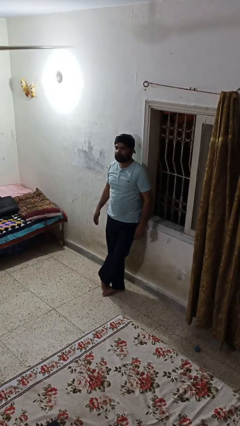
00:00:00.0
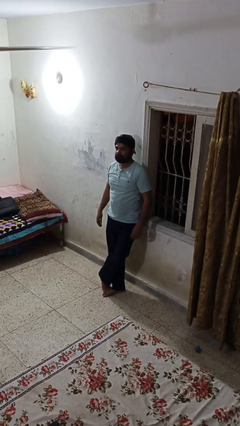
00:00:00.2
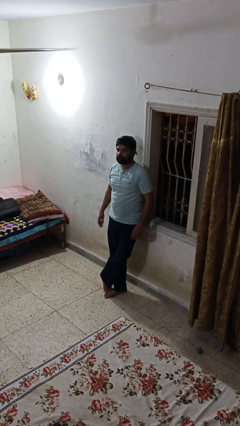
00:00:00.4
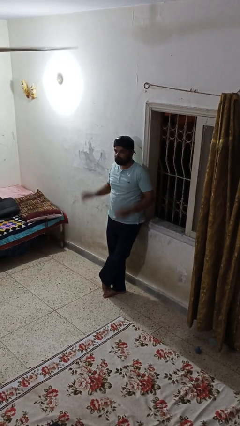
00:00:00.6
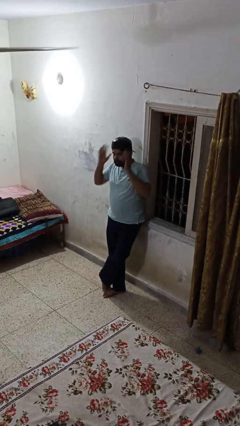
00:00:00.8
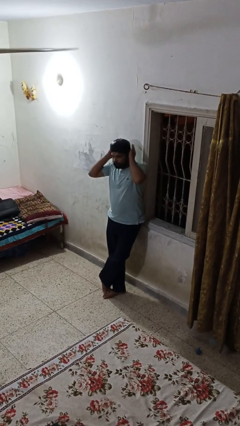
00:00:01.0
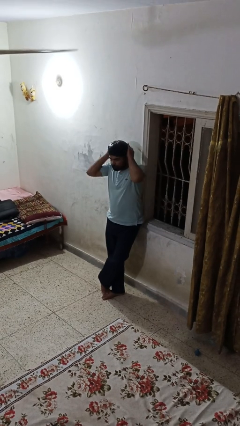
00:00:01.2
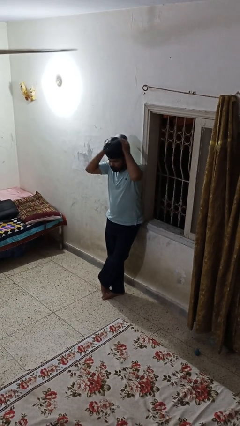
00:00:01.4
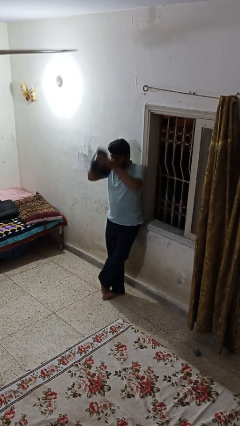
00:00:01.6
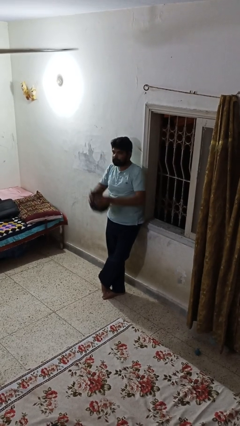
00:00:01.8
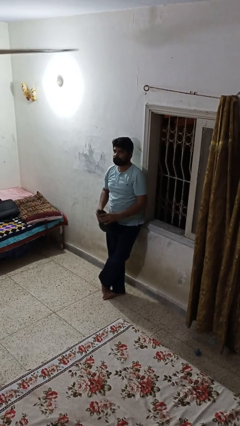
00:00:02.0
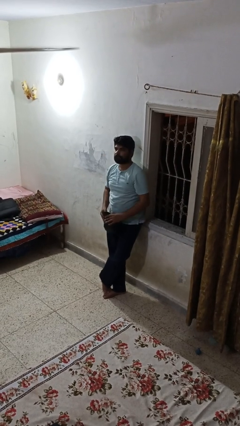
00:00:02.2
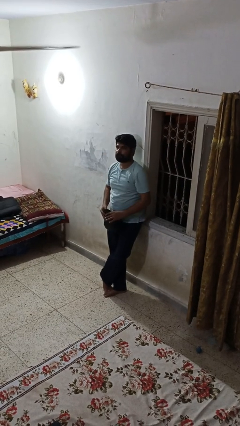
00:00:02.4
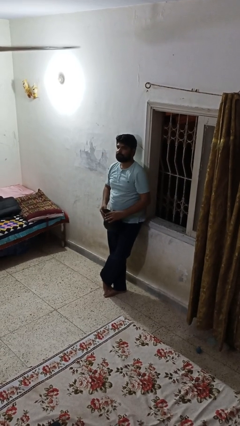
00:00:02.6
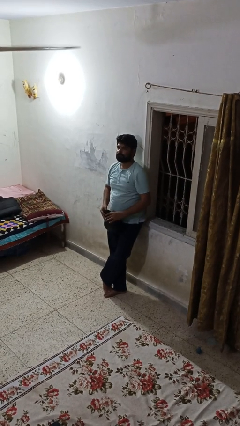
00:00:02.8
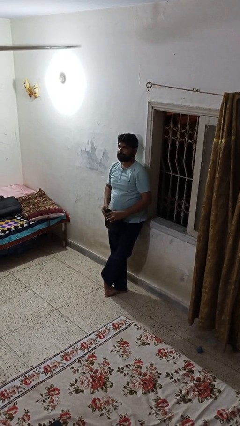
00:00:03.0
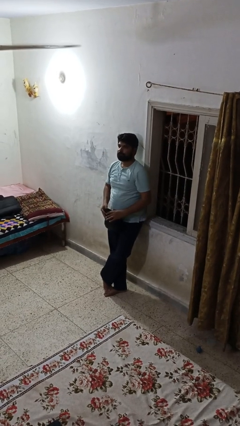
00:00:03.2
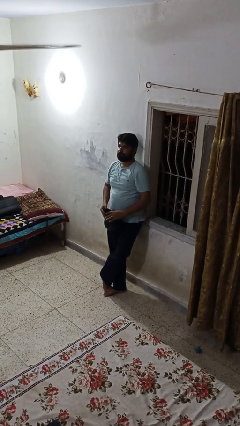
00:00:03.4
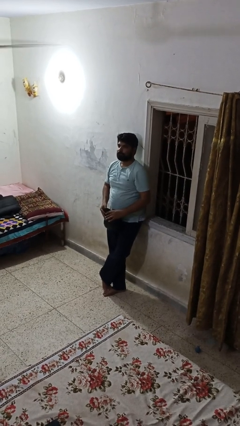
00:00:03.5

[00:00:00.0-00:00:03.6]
person takes off hat

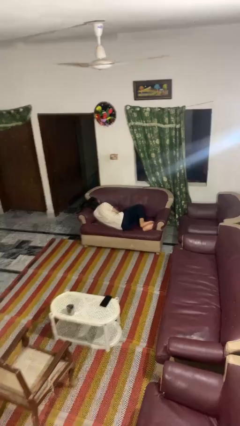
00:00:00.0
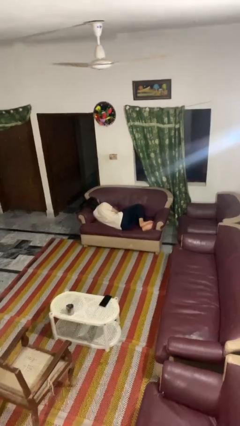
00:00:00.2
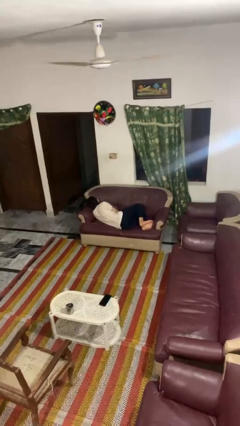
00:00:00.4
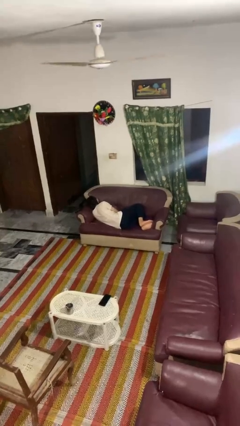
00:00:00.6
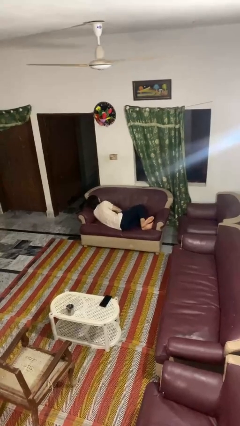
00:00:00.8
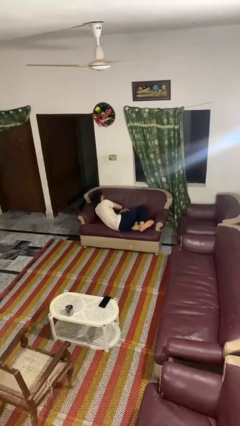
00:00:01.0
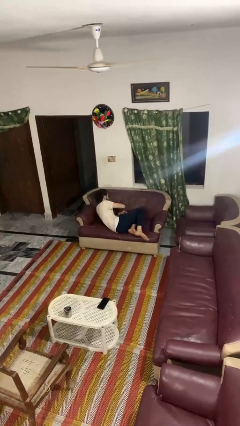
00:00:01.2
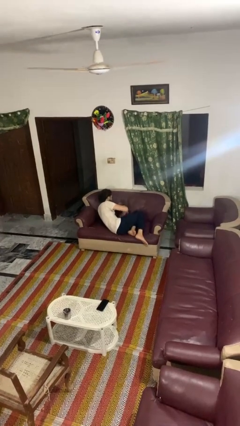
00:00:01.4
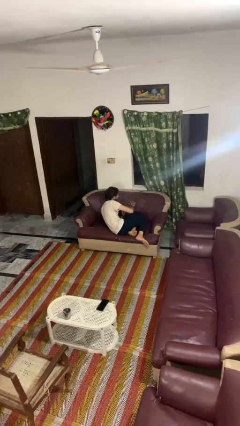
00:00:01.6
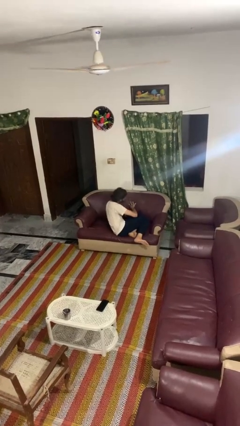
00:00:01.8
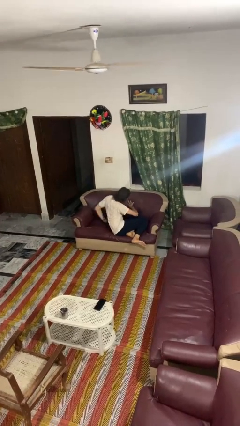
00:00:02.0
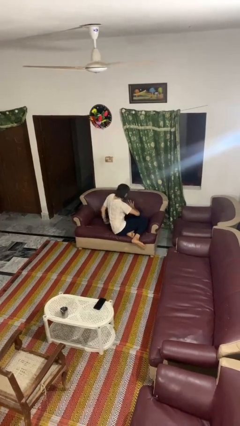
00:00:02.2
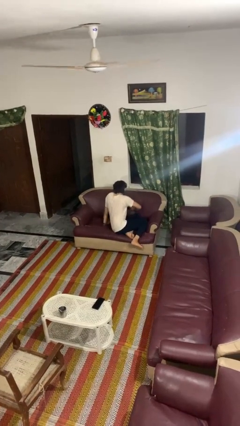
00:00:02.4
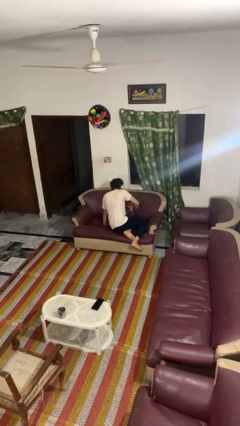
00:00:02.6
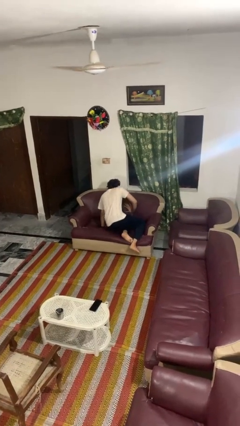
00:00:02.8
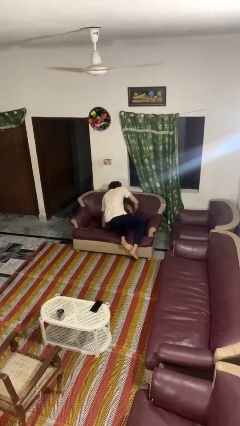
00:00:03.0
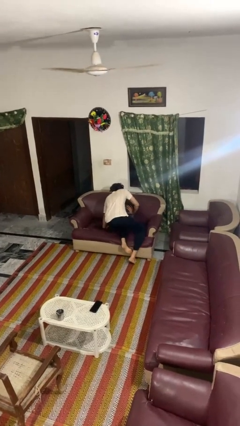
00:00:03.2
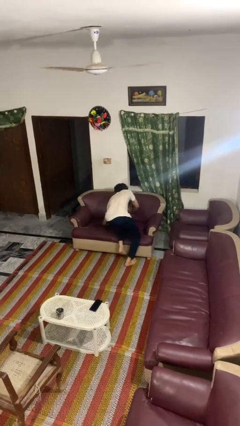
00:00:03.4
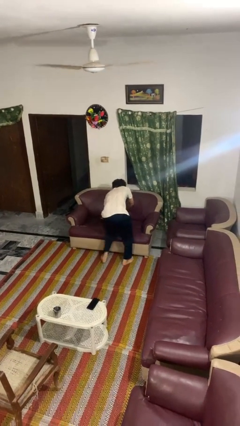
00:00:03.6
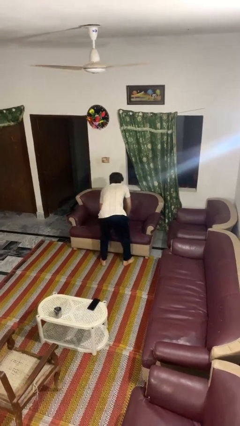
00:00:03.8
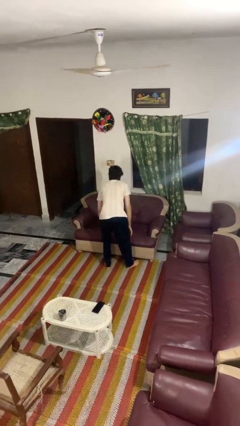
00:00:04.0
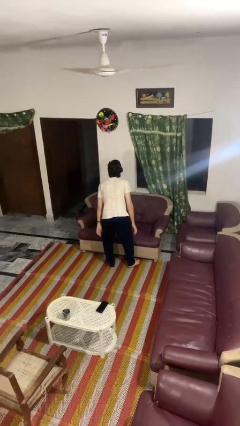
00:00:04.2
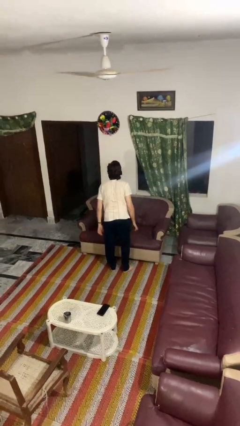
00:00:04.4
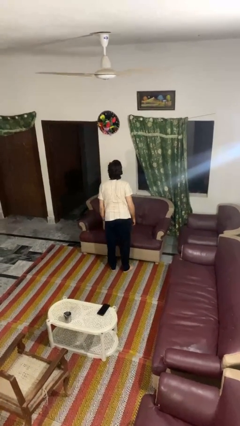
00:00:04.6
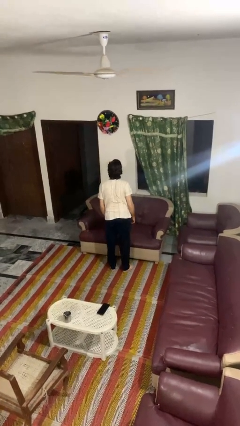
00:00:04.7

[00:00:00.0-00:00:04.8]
person stands up

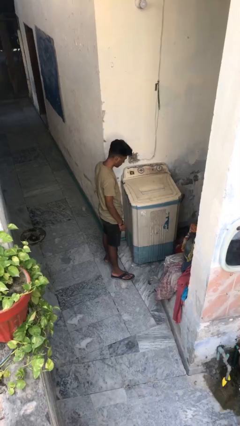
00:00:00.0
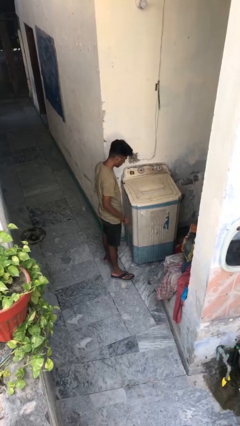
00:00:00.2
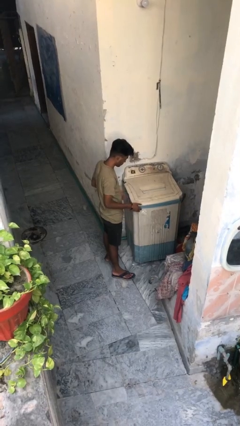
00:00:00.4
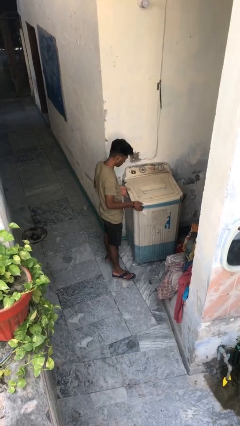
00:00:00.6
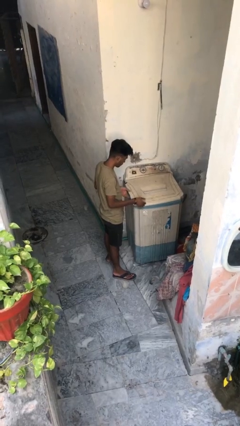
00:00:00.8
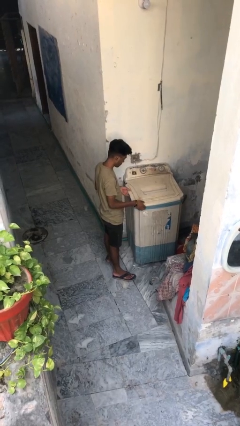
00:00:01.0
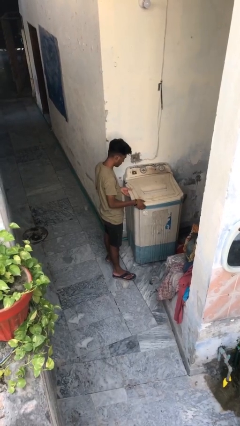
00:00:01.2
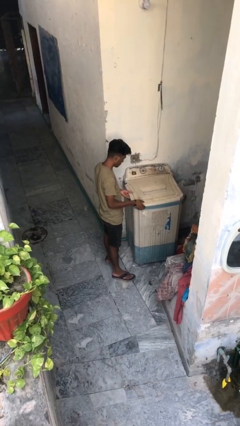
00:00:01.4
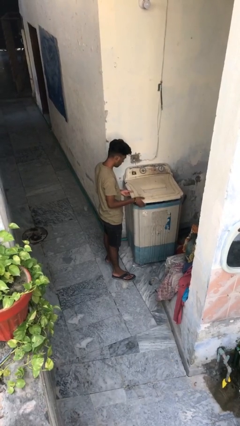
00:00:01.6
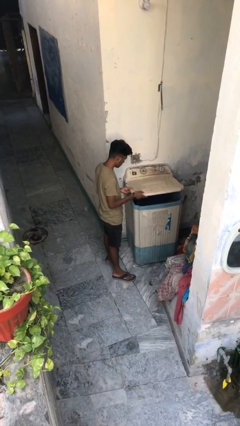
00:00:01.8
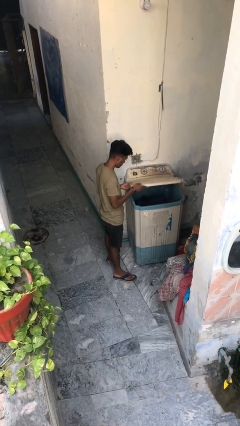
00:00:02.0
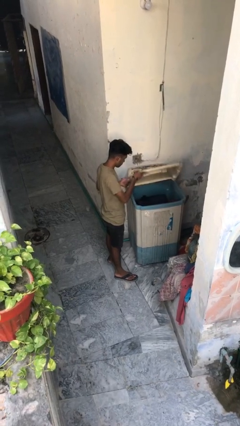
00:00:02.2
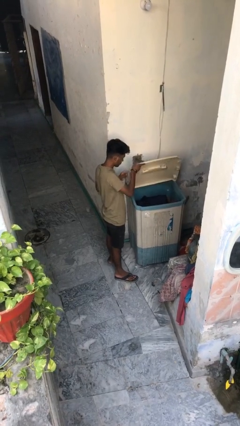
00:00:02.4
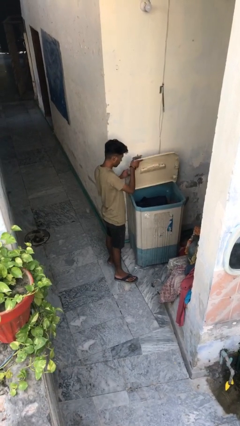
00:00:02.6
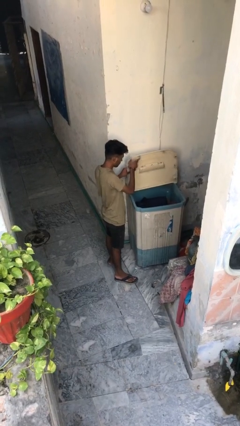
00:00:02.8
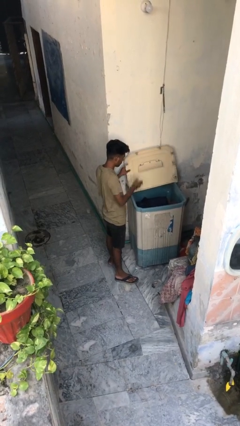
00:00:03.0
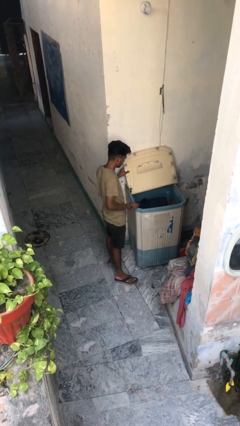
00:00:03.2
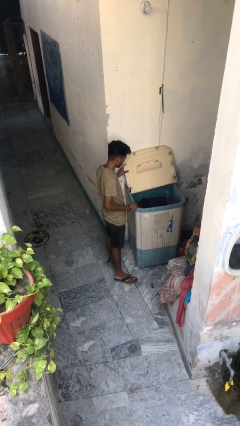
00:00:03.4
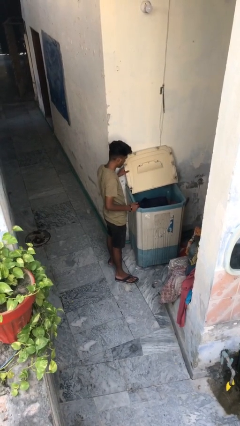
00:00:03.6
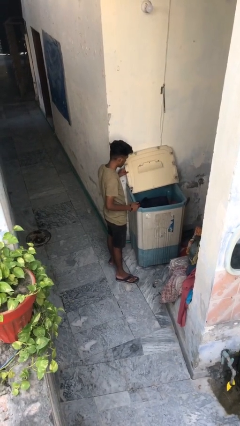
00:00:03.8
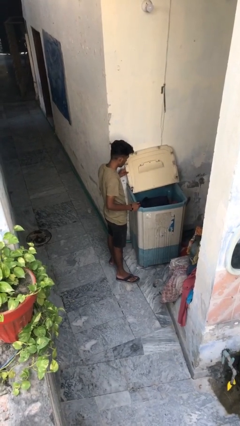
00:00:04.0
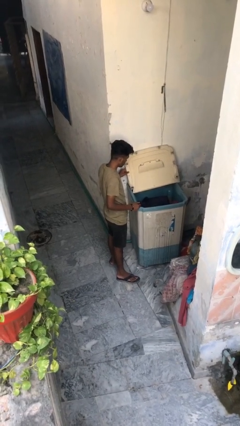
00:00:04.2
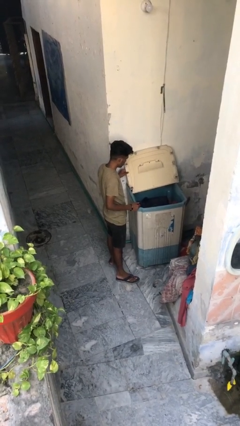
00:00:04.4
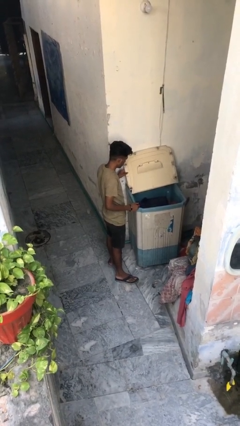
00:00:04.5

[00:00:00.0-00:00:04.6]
person opens clothes washer

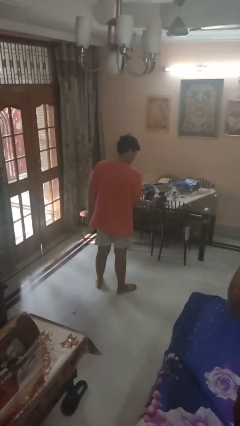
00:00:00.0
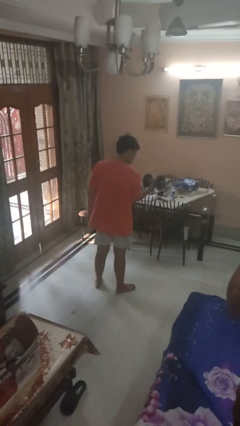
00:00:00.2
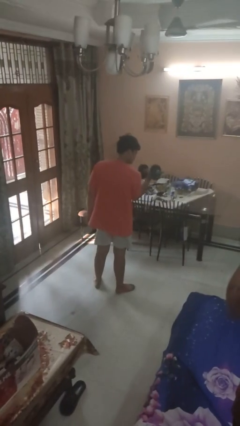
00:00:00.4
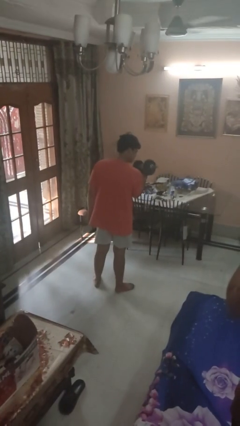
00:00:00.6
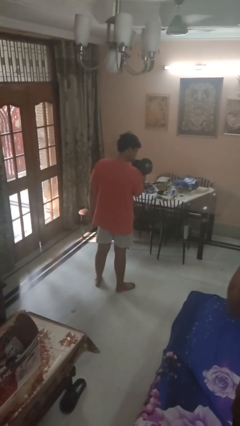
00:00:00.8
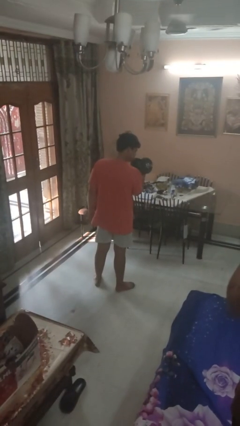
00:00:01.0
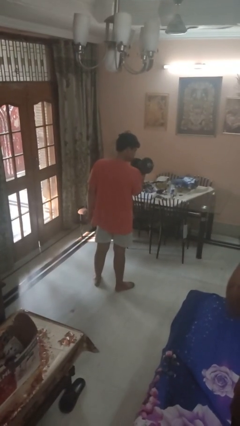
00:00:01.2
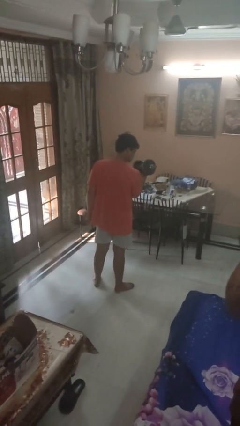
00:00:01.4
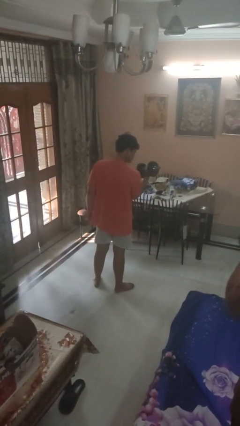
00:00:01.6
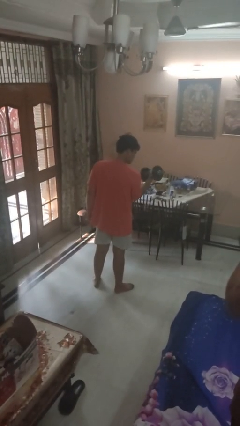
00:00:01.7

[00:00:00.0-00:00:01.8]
person lifts dumbbells

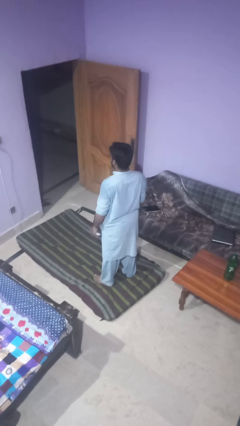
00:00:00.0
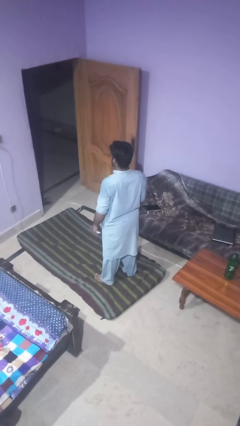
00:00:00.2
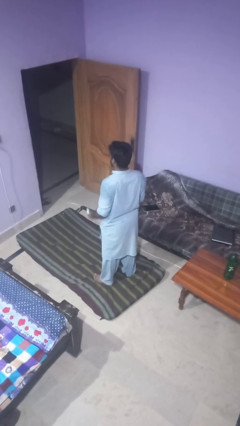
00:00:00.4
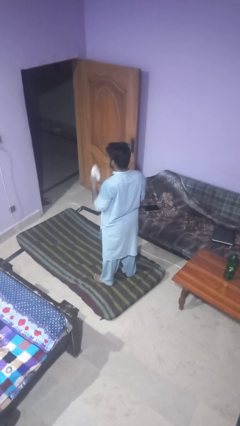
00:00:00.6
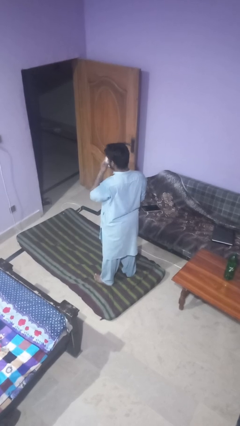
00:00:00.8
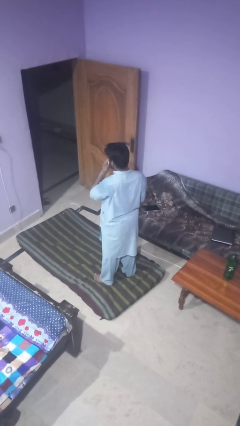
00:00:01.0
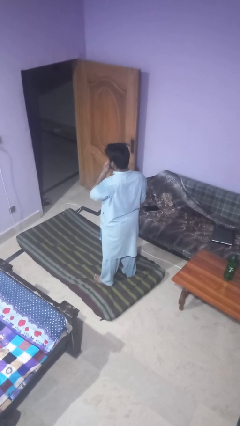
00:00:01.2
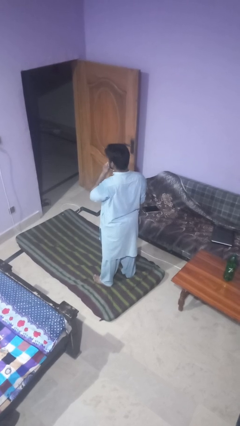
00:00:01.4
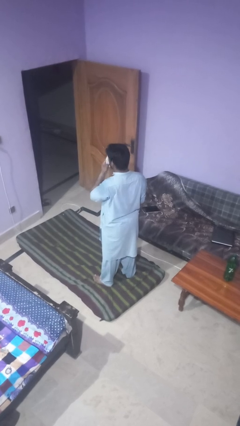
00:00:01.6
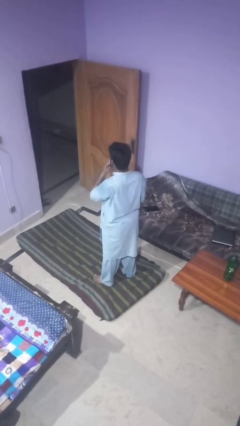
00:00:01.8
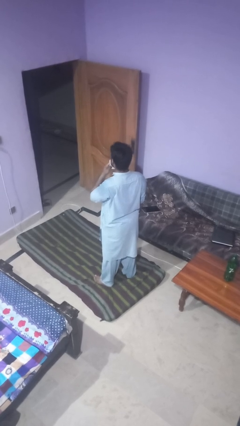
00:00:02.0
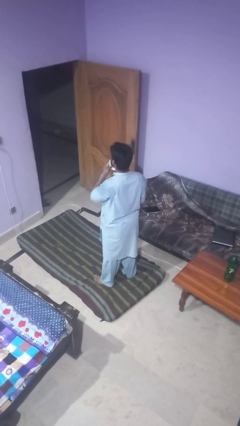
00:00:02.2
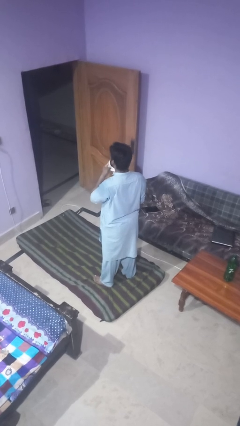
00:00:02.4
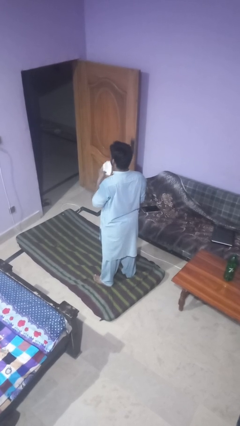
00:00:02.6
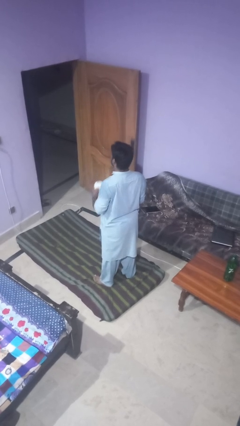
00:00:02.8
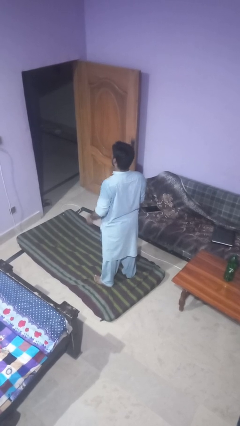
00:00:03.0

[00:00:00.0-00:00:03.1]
person wipes mouth with napkin
